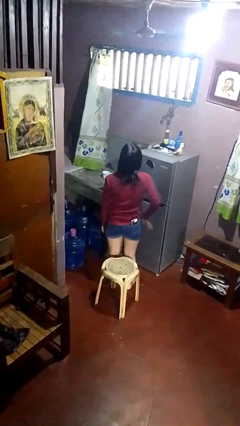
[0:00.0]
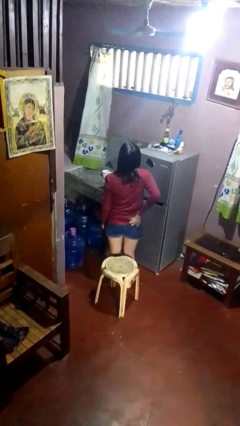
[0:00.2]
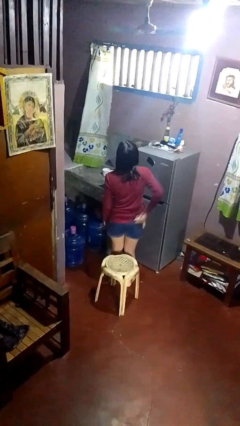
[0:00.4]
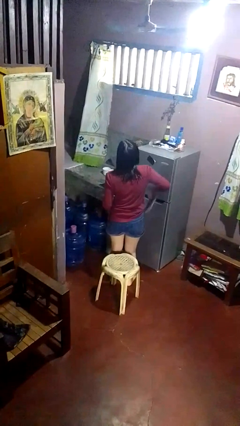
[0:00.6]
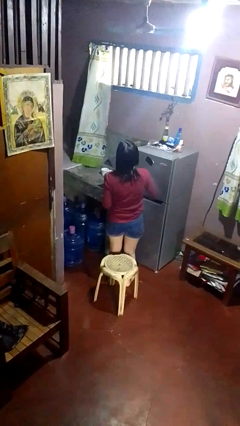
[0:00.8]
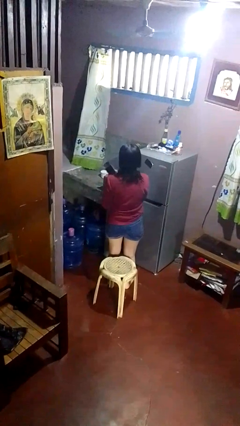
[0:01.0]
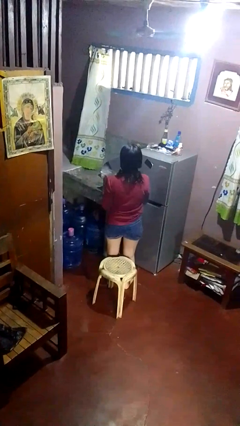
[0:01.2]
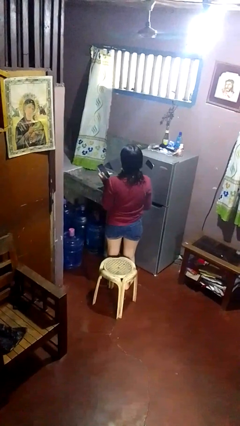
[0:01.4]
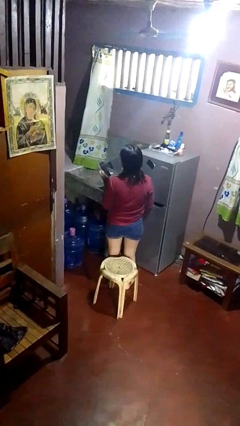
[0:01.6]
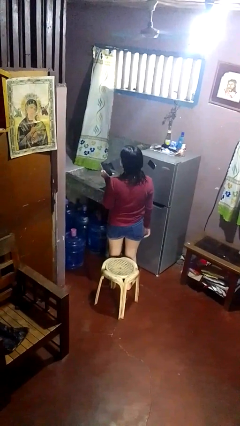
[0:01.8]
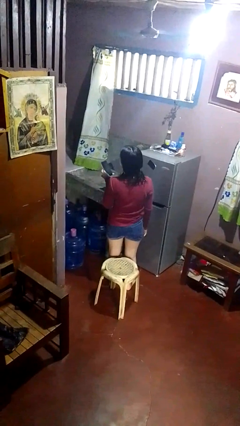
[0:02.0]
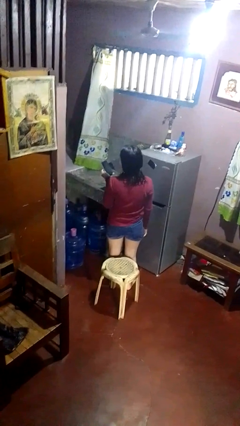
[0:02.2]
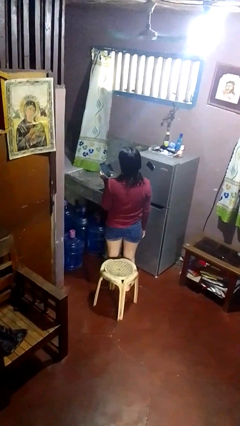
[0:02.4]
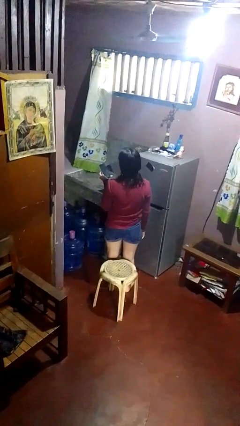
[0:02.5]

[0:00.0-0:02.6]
person takes phone from pocket

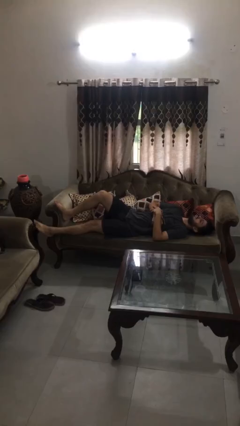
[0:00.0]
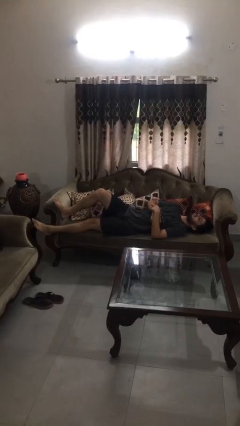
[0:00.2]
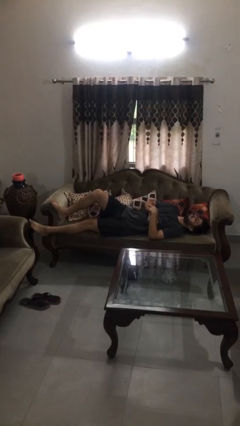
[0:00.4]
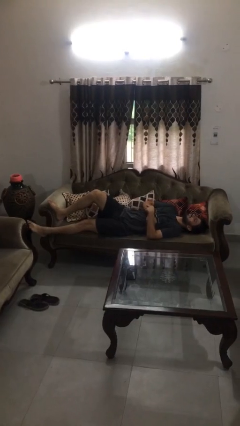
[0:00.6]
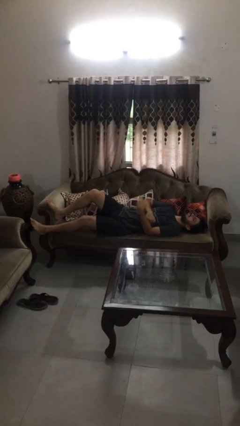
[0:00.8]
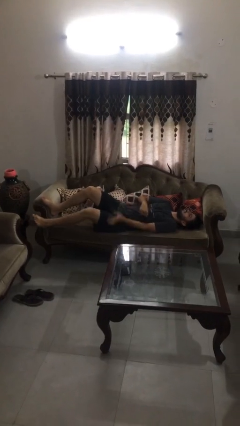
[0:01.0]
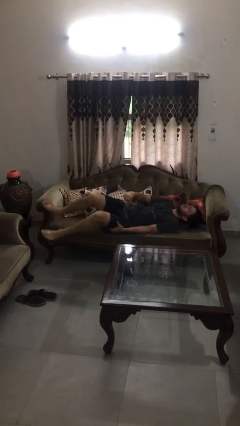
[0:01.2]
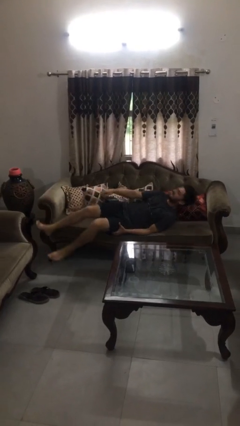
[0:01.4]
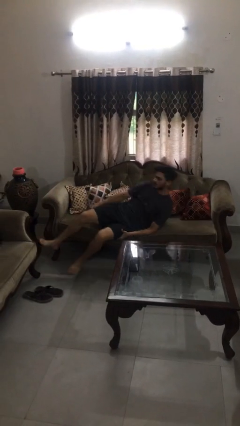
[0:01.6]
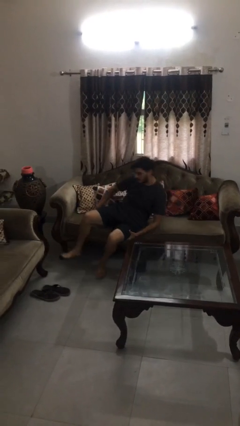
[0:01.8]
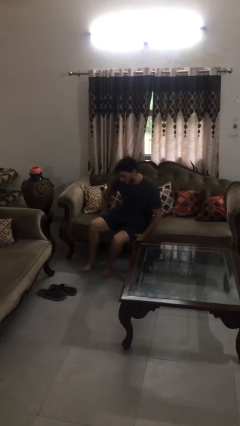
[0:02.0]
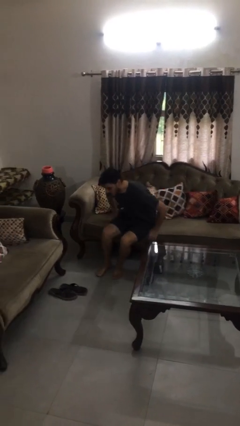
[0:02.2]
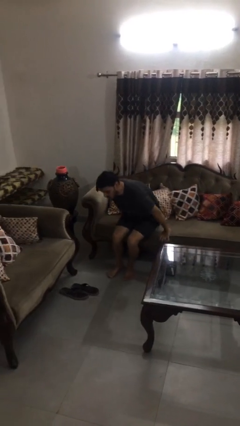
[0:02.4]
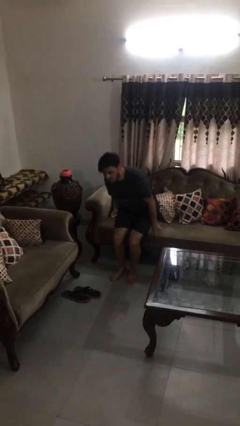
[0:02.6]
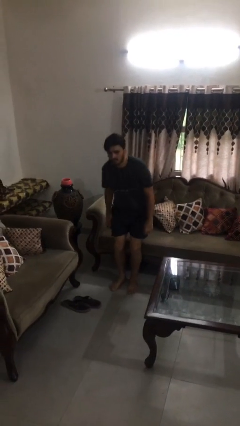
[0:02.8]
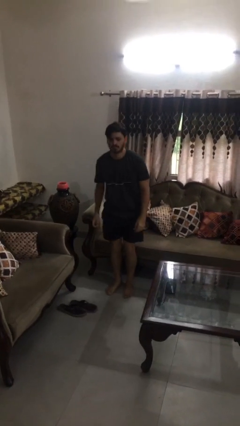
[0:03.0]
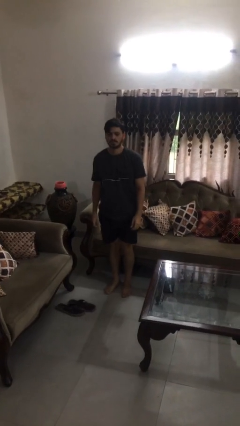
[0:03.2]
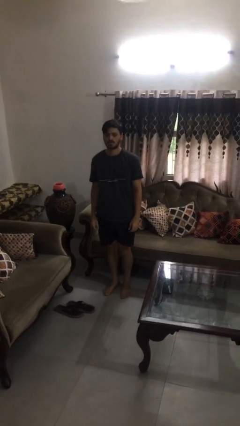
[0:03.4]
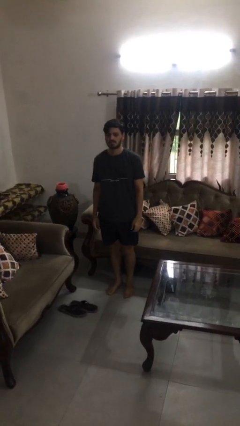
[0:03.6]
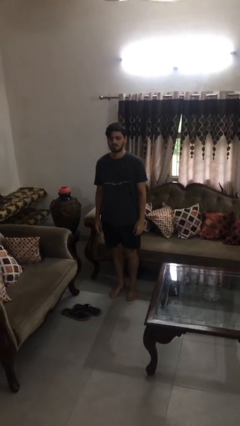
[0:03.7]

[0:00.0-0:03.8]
person stands up

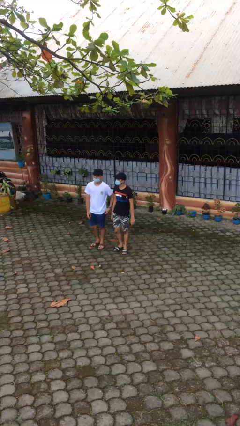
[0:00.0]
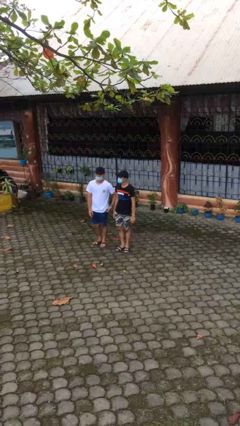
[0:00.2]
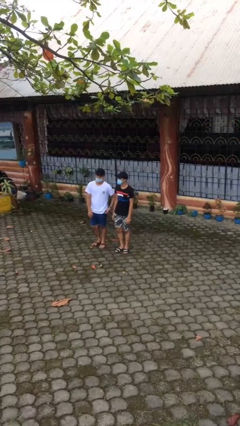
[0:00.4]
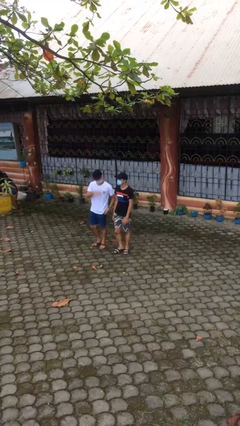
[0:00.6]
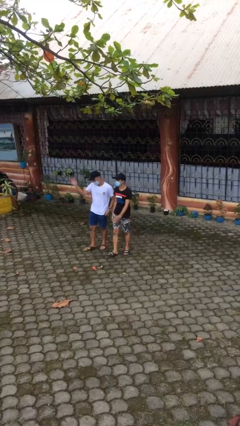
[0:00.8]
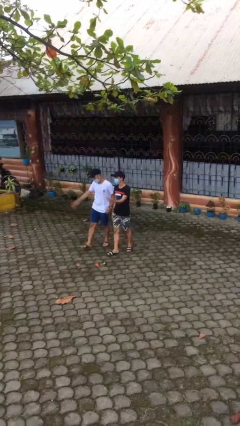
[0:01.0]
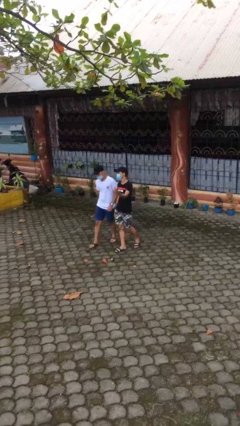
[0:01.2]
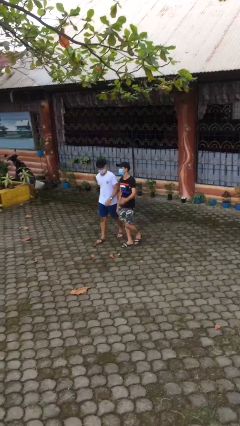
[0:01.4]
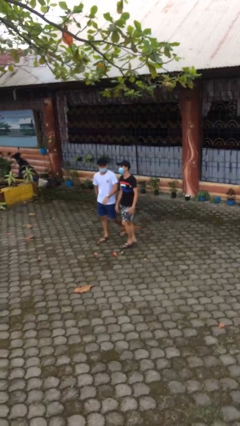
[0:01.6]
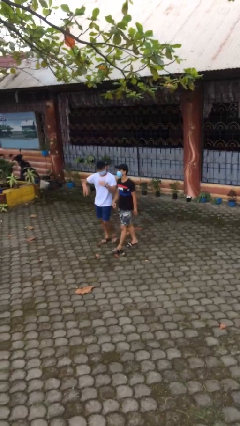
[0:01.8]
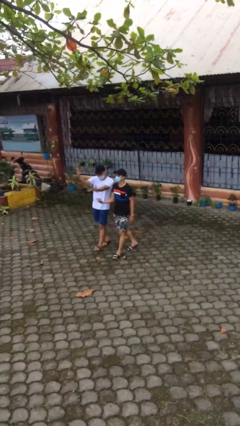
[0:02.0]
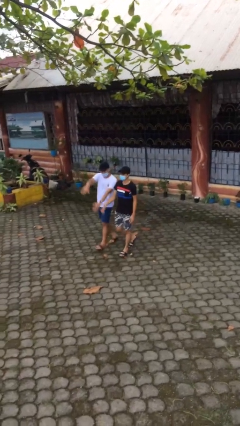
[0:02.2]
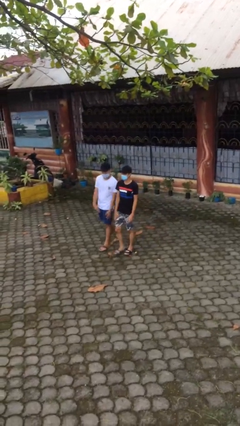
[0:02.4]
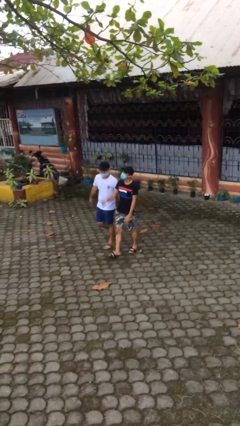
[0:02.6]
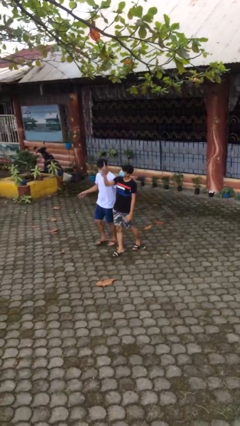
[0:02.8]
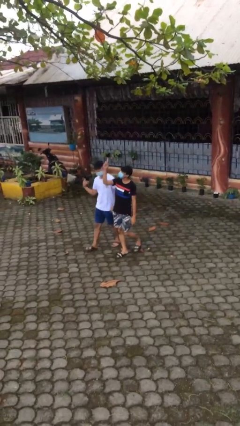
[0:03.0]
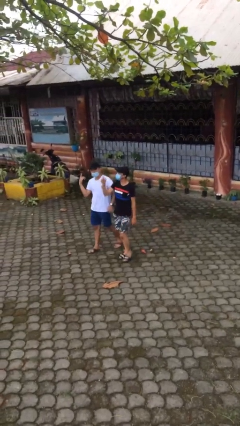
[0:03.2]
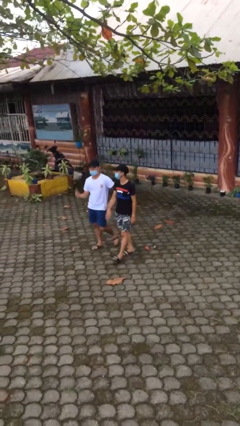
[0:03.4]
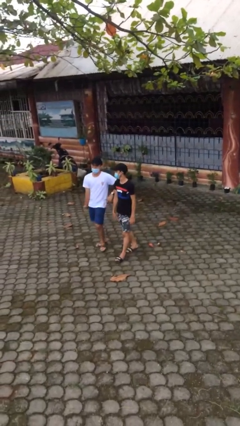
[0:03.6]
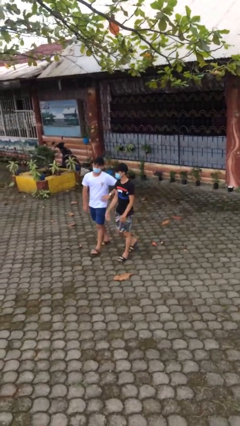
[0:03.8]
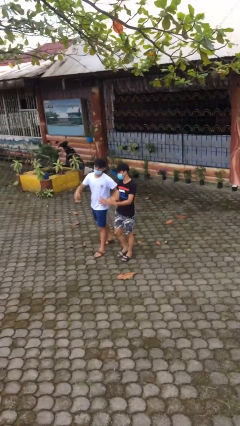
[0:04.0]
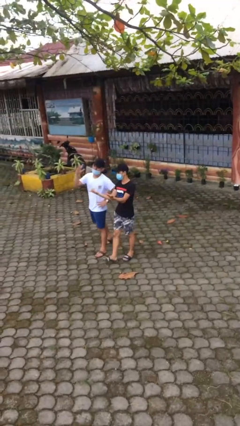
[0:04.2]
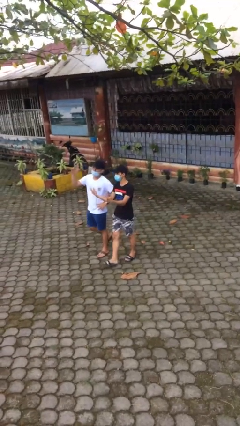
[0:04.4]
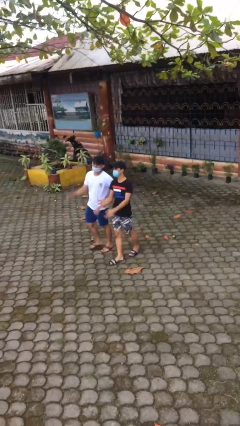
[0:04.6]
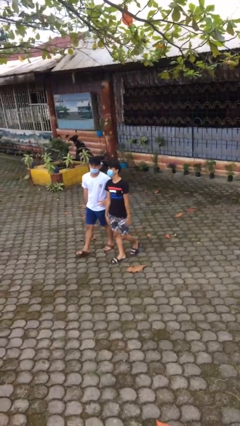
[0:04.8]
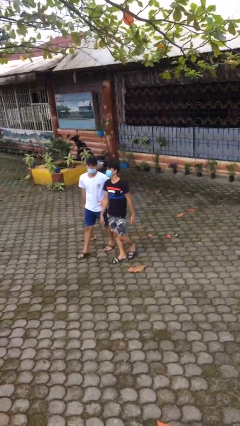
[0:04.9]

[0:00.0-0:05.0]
person talks to person

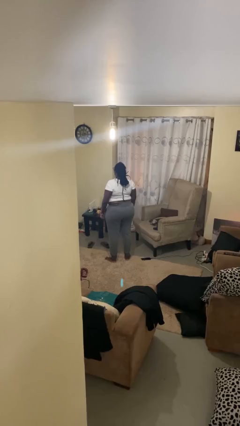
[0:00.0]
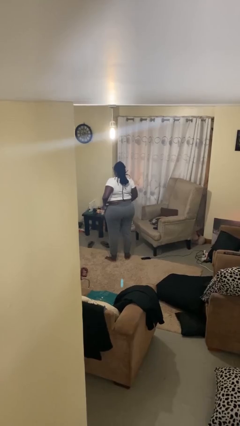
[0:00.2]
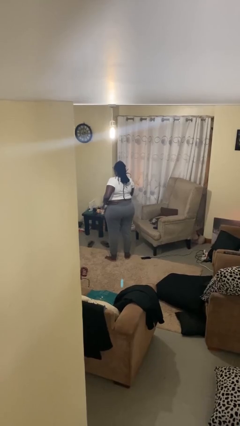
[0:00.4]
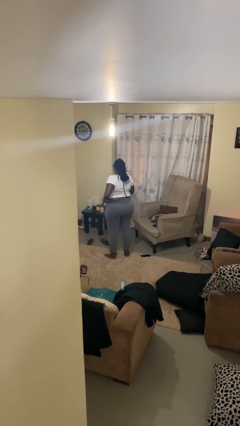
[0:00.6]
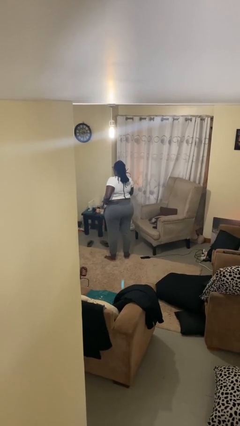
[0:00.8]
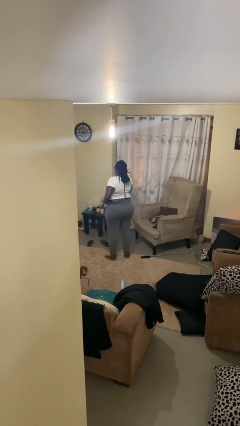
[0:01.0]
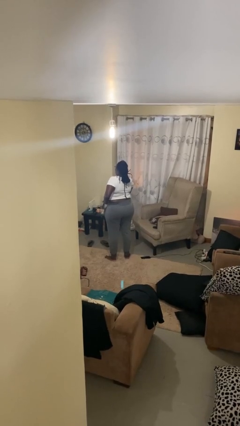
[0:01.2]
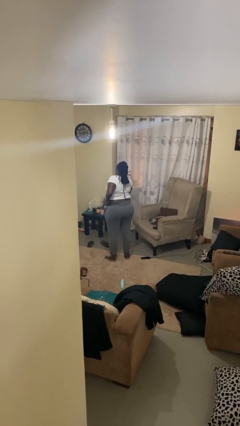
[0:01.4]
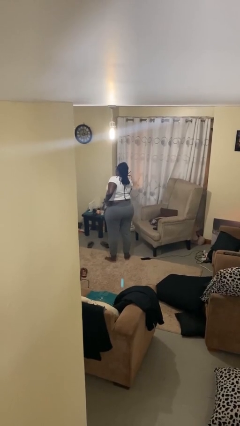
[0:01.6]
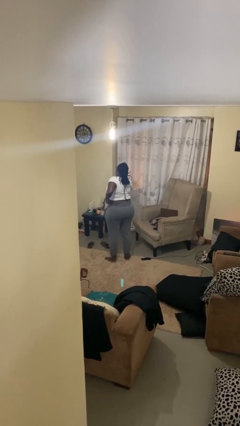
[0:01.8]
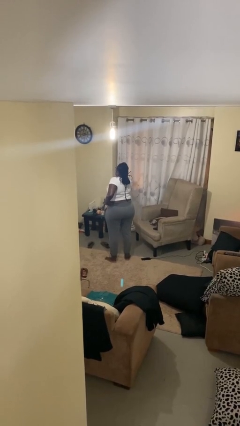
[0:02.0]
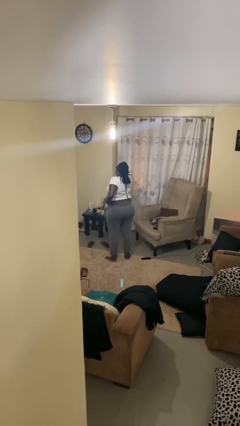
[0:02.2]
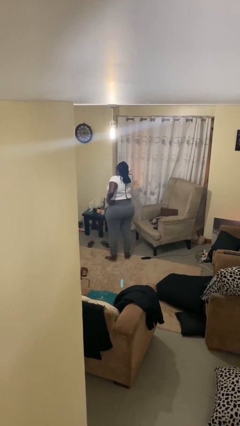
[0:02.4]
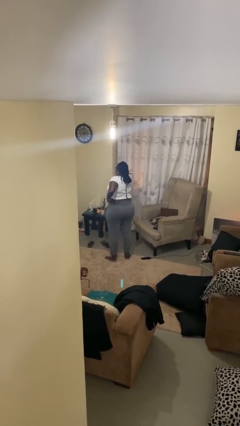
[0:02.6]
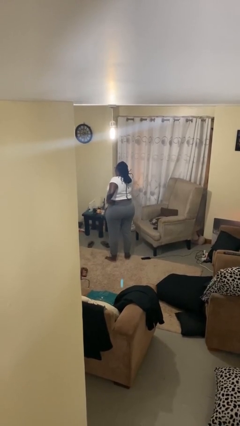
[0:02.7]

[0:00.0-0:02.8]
person hikes up pants

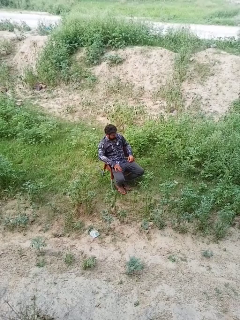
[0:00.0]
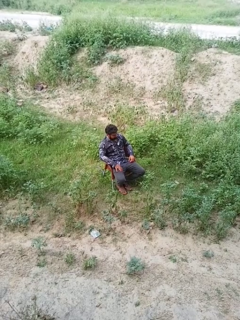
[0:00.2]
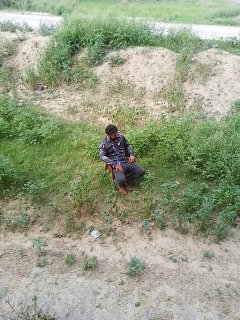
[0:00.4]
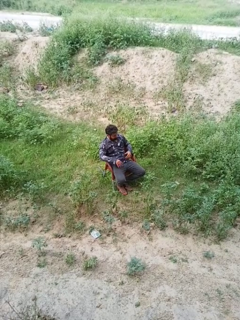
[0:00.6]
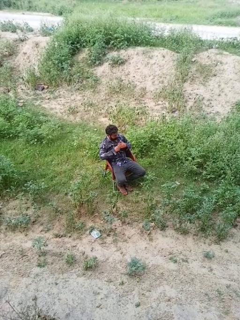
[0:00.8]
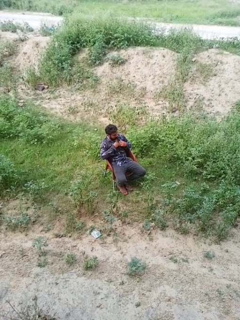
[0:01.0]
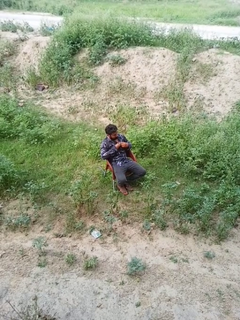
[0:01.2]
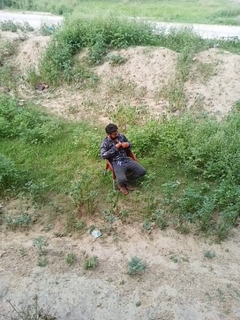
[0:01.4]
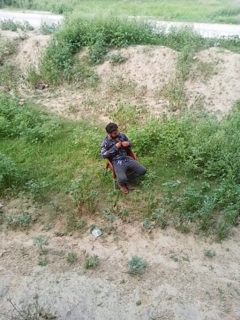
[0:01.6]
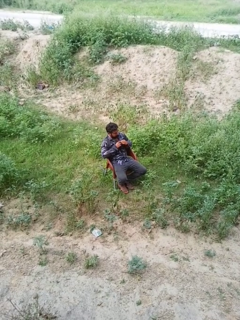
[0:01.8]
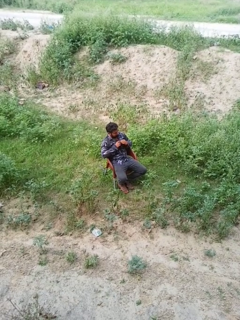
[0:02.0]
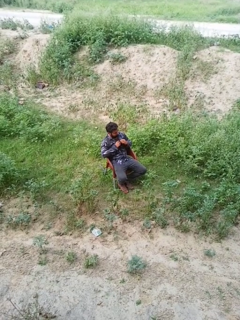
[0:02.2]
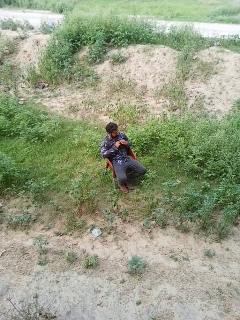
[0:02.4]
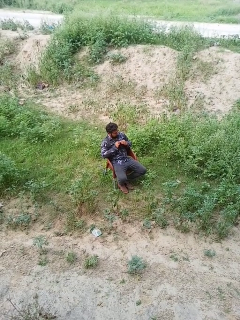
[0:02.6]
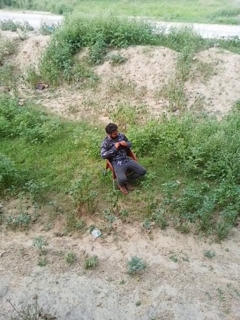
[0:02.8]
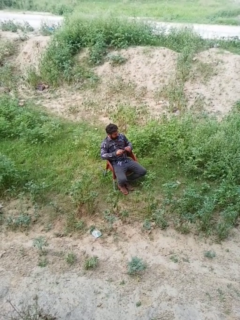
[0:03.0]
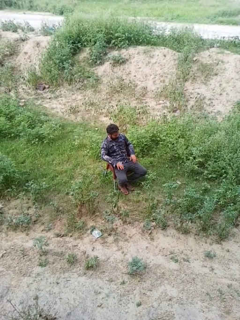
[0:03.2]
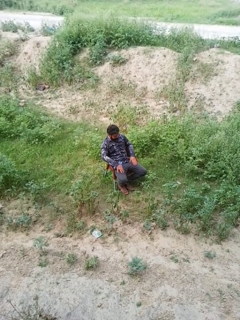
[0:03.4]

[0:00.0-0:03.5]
person buttons shirt

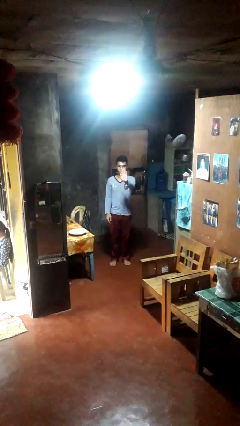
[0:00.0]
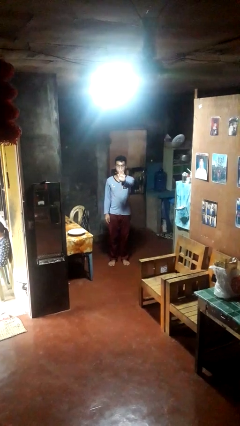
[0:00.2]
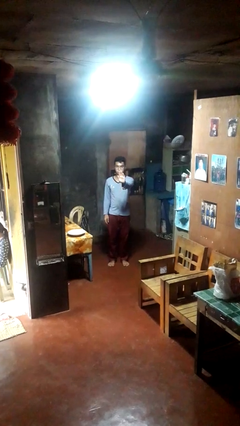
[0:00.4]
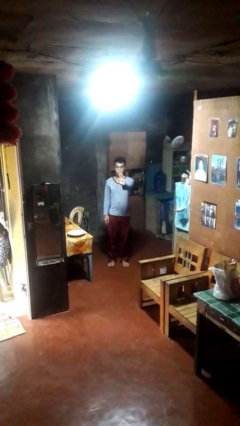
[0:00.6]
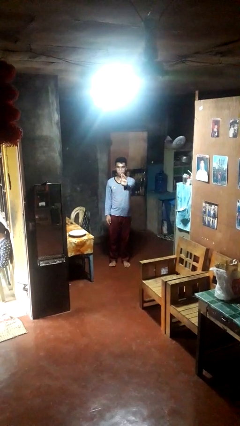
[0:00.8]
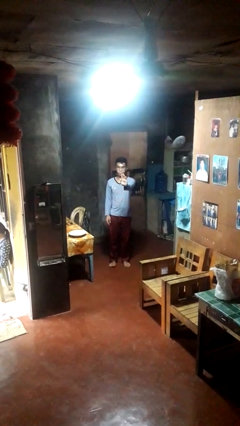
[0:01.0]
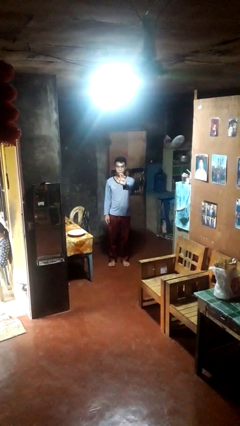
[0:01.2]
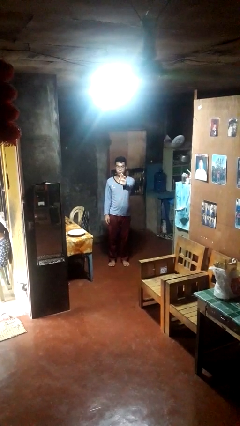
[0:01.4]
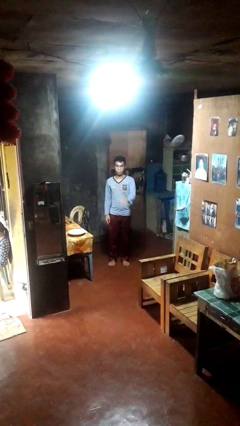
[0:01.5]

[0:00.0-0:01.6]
person gestures stop
